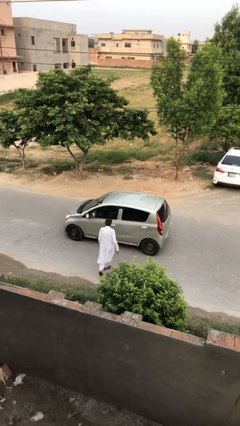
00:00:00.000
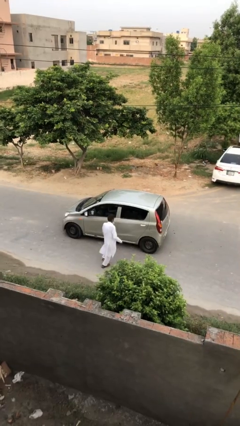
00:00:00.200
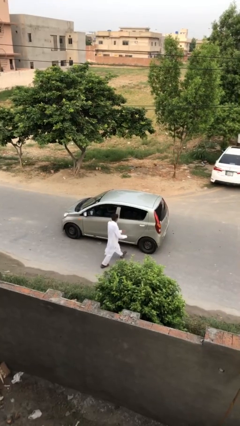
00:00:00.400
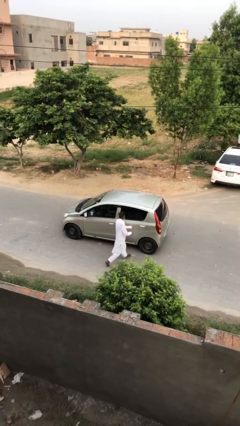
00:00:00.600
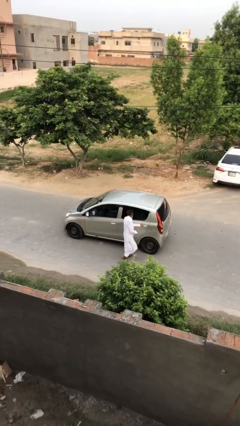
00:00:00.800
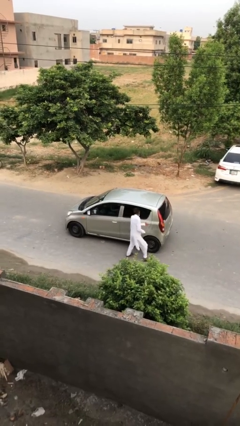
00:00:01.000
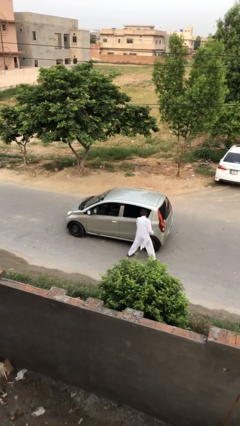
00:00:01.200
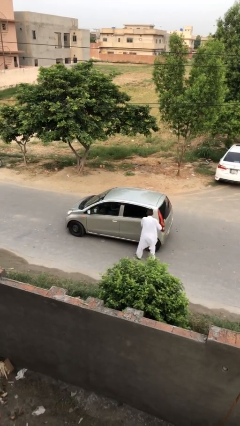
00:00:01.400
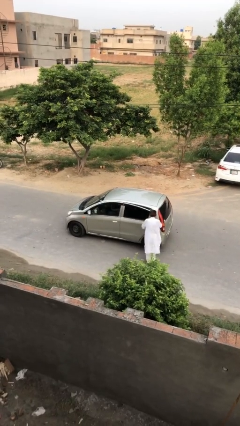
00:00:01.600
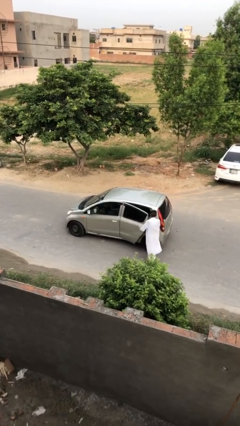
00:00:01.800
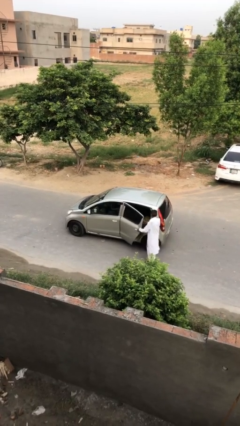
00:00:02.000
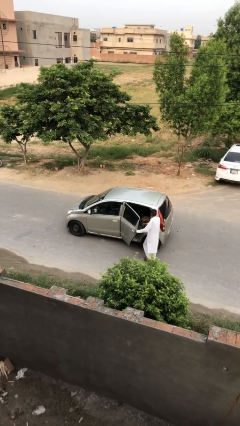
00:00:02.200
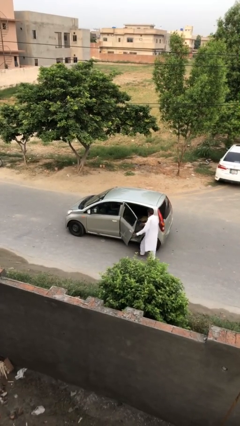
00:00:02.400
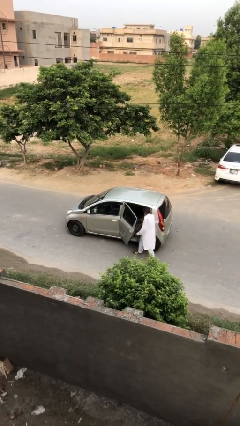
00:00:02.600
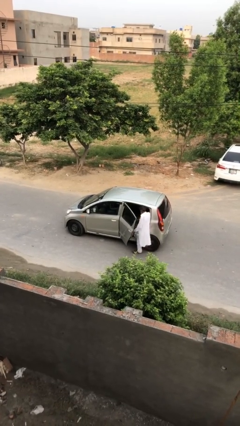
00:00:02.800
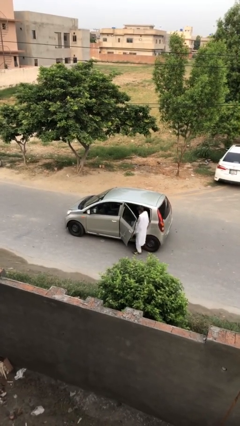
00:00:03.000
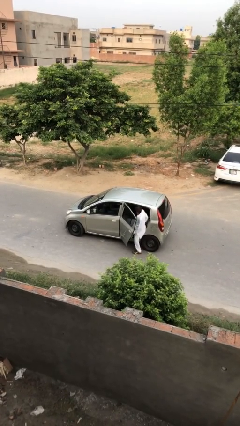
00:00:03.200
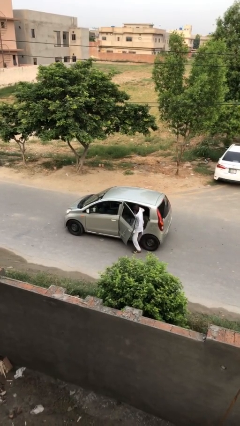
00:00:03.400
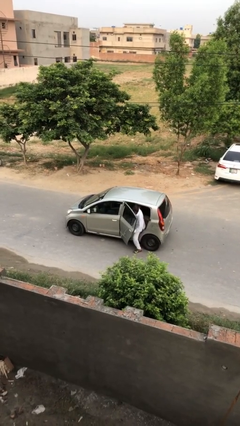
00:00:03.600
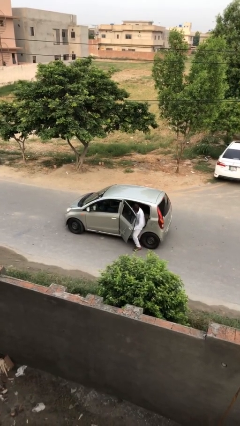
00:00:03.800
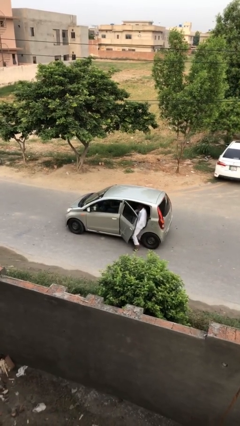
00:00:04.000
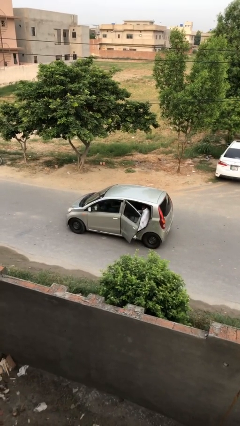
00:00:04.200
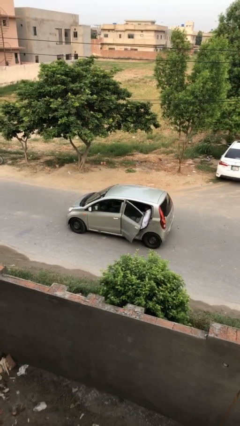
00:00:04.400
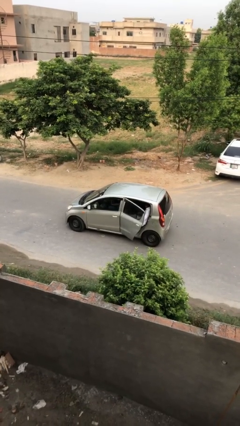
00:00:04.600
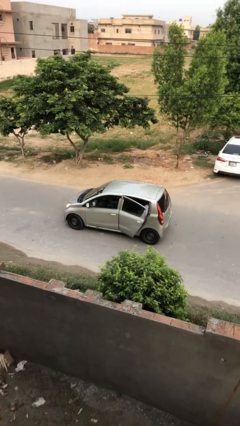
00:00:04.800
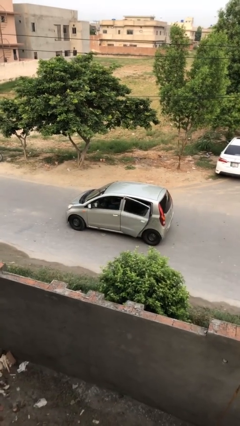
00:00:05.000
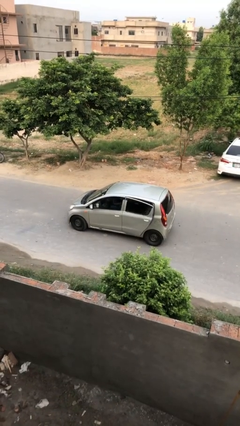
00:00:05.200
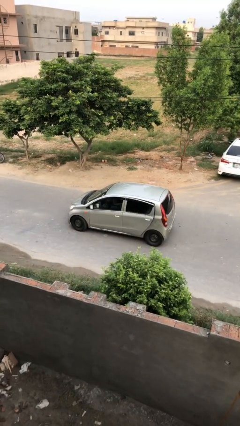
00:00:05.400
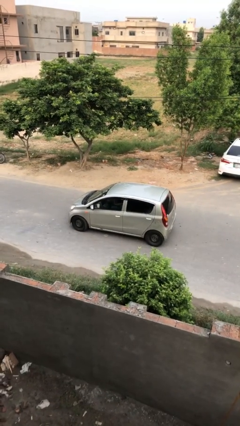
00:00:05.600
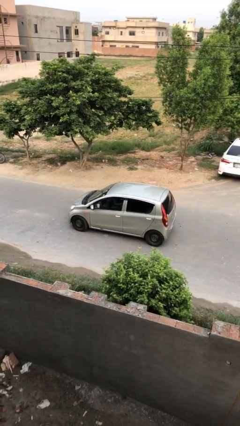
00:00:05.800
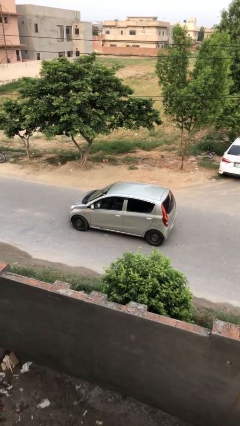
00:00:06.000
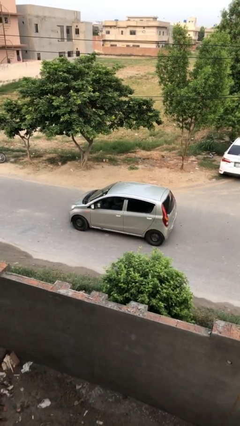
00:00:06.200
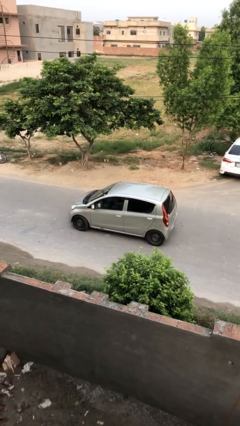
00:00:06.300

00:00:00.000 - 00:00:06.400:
car picks up person

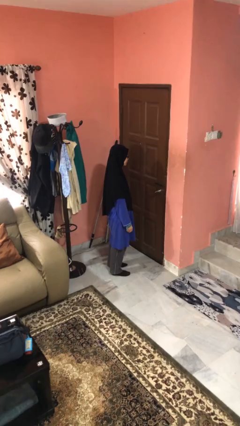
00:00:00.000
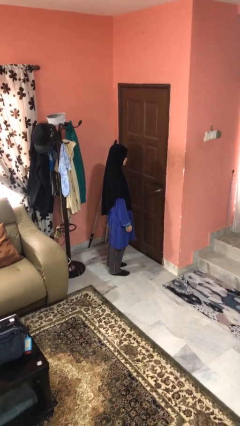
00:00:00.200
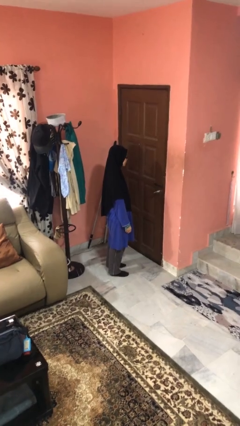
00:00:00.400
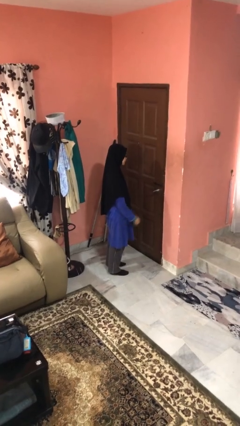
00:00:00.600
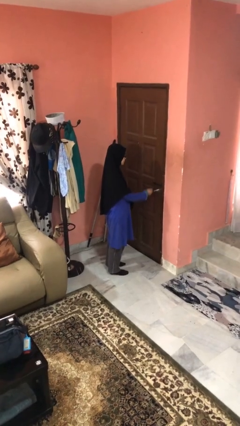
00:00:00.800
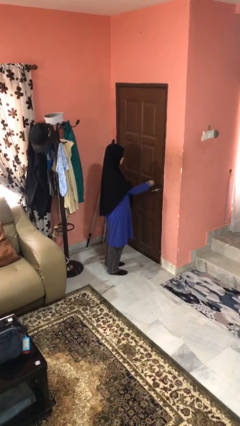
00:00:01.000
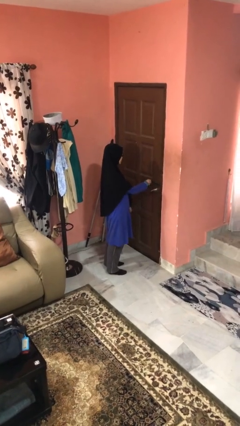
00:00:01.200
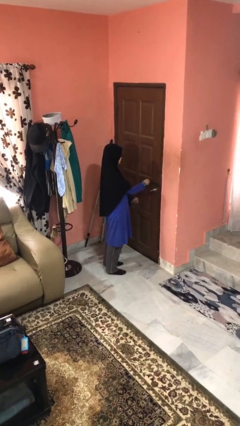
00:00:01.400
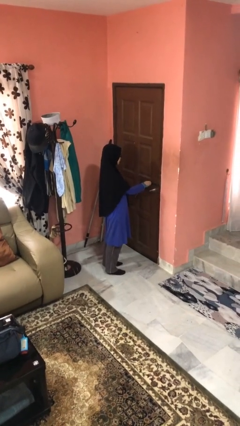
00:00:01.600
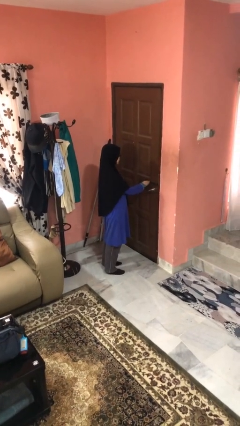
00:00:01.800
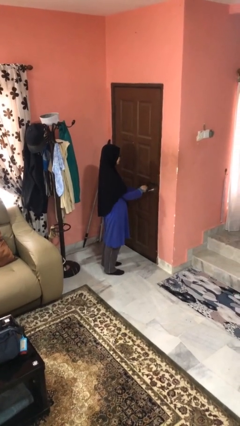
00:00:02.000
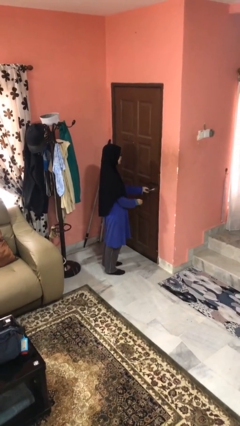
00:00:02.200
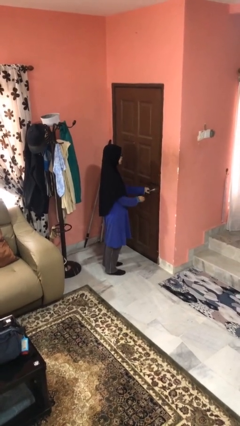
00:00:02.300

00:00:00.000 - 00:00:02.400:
person unlocks door with keys

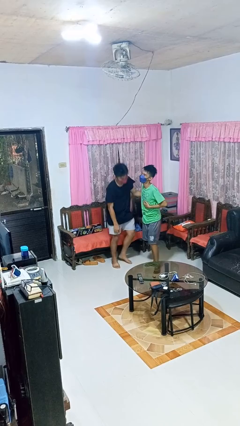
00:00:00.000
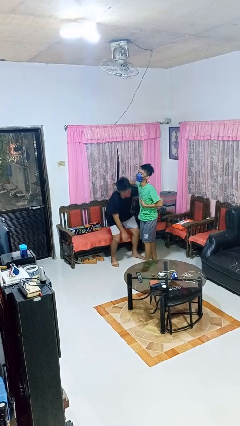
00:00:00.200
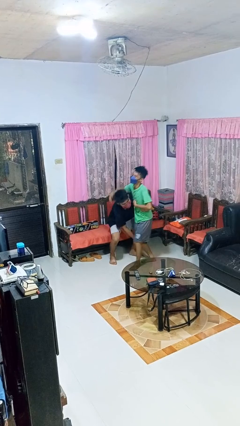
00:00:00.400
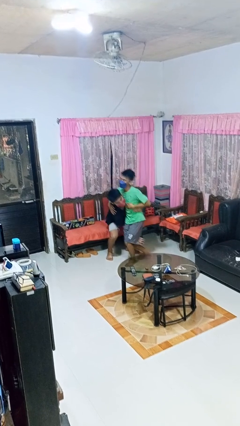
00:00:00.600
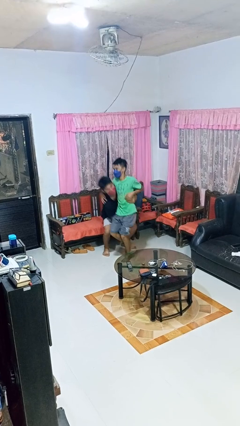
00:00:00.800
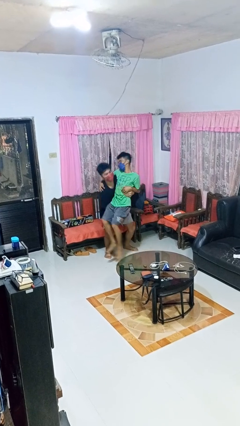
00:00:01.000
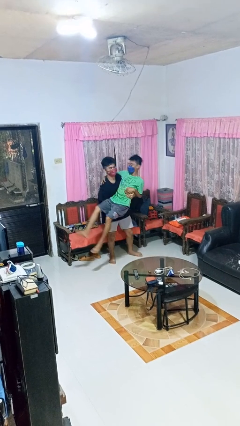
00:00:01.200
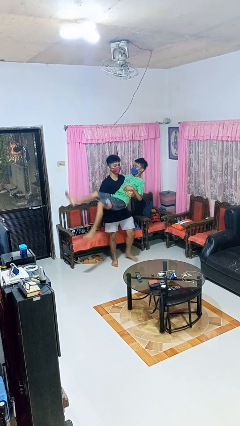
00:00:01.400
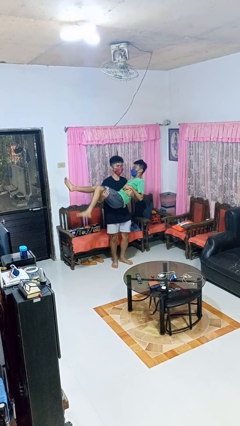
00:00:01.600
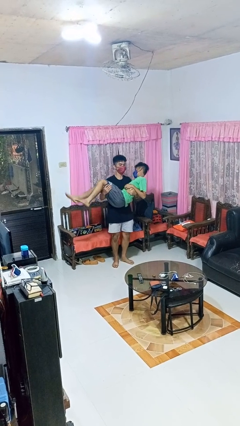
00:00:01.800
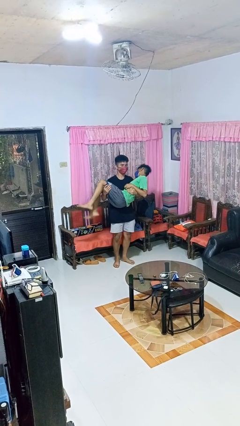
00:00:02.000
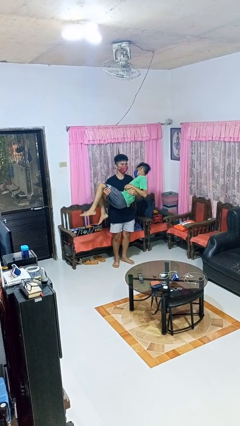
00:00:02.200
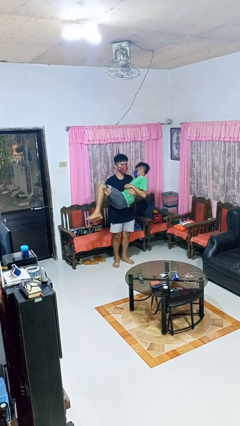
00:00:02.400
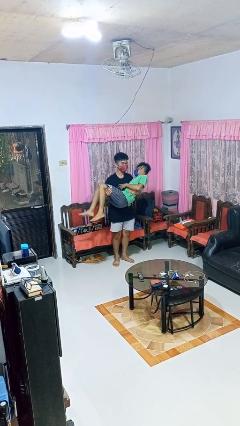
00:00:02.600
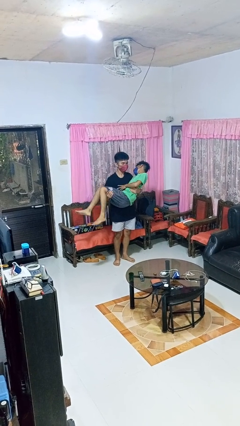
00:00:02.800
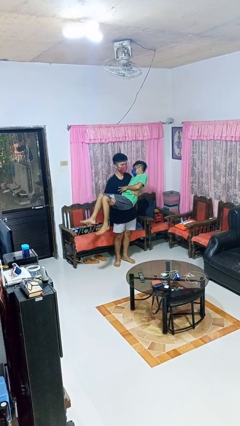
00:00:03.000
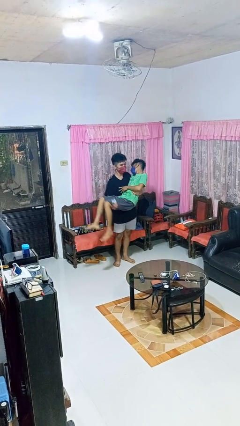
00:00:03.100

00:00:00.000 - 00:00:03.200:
person picks up person

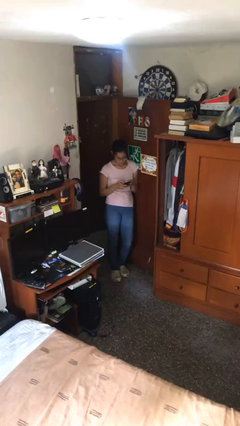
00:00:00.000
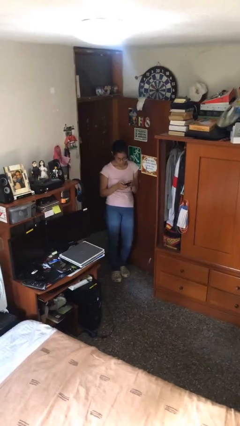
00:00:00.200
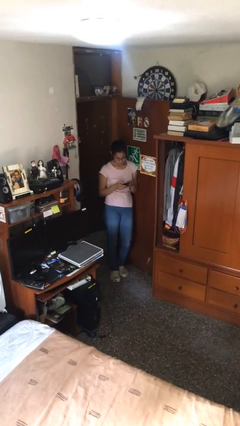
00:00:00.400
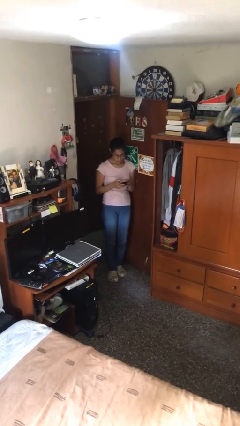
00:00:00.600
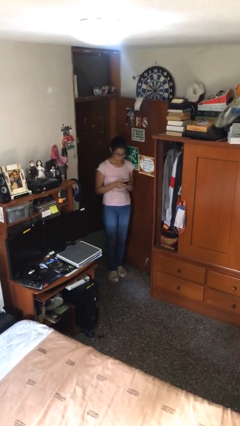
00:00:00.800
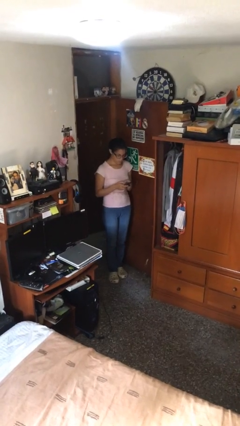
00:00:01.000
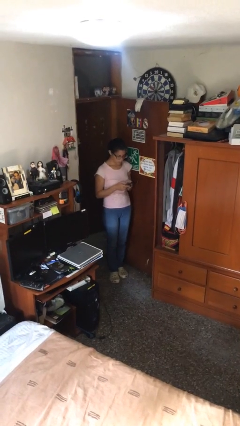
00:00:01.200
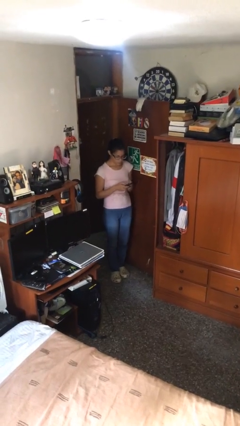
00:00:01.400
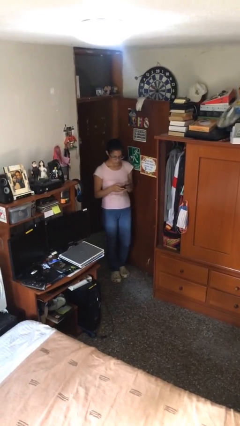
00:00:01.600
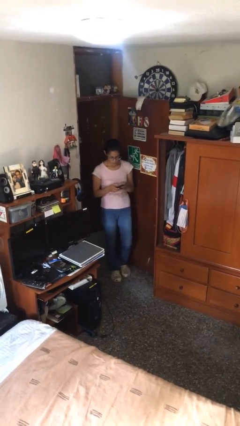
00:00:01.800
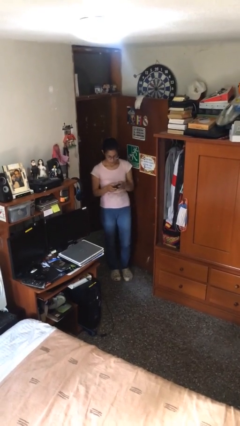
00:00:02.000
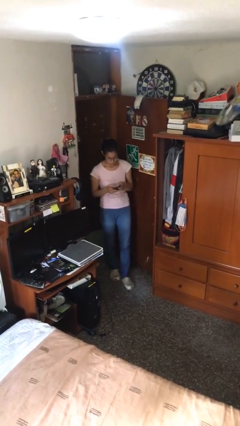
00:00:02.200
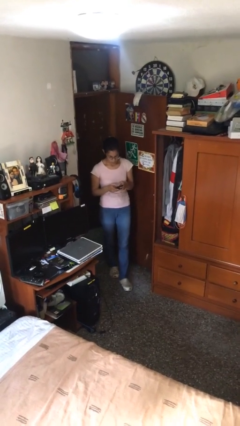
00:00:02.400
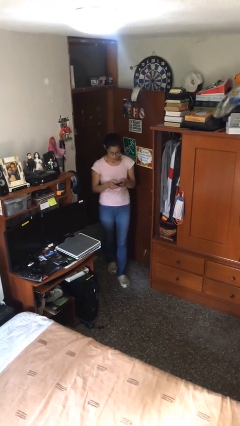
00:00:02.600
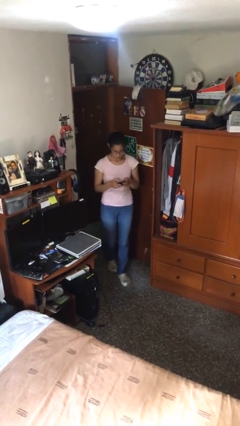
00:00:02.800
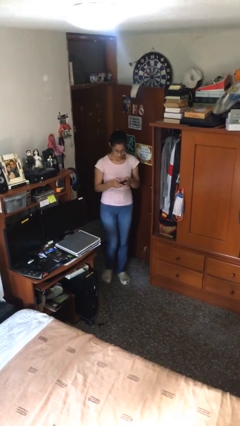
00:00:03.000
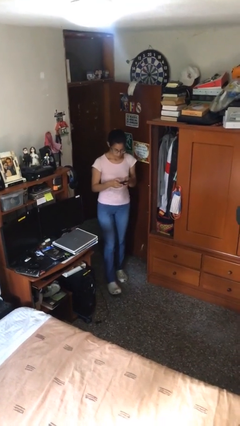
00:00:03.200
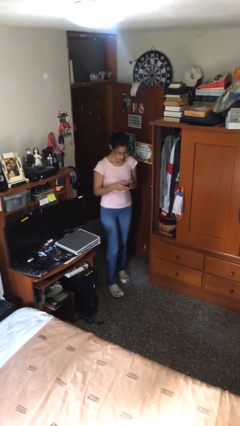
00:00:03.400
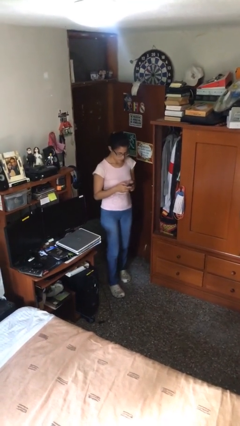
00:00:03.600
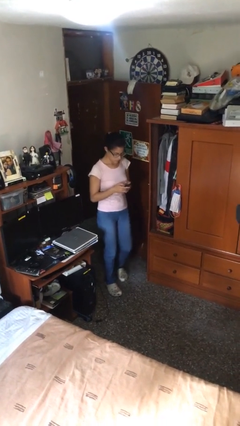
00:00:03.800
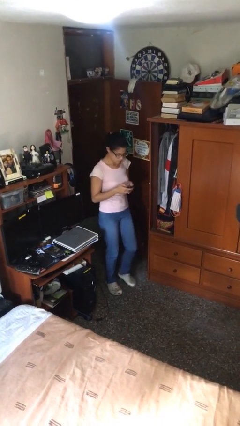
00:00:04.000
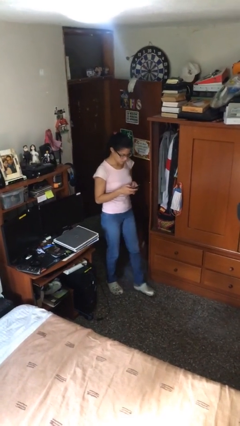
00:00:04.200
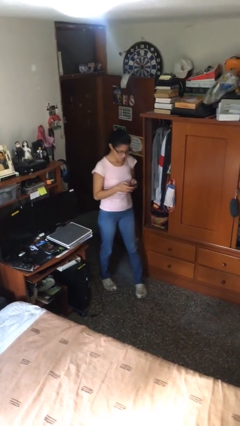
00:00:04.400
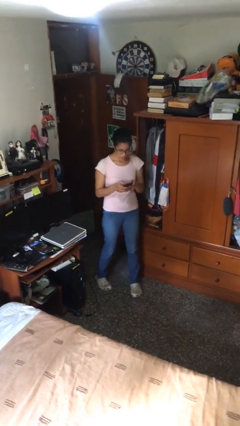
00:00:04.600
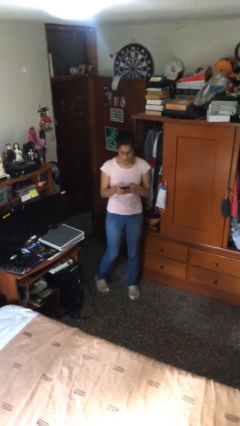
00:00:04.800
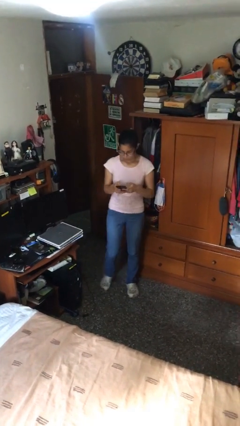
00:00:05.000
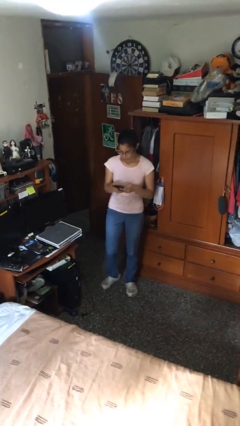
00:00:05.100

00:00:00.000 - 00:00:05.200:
person texts on phone

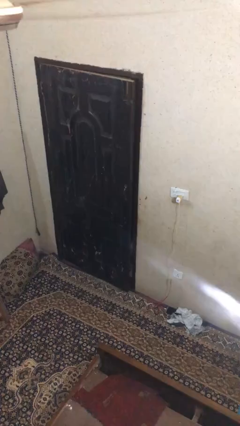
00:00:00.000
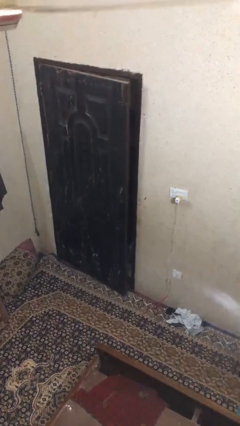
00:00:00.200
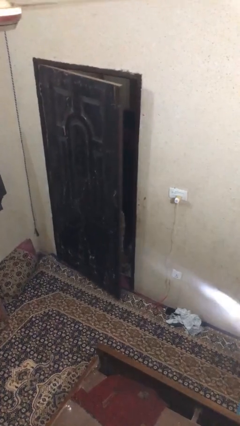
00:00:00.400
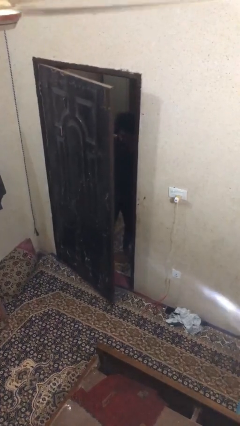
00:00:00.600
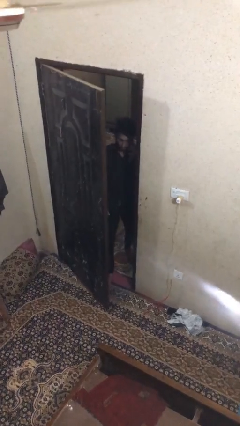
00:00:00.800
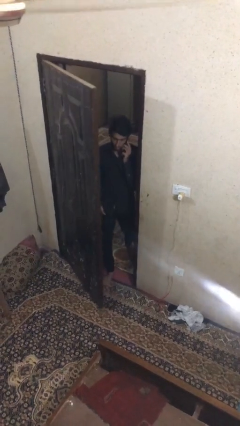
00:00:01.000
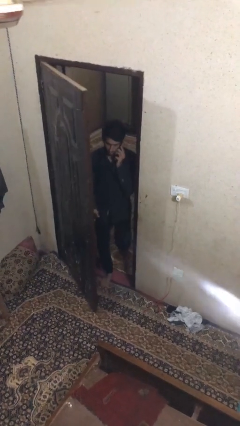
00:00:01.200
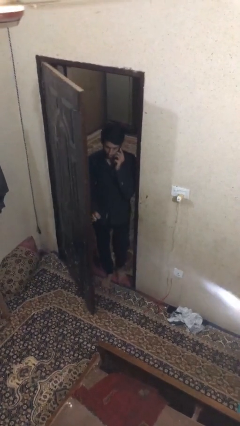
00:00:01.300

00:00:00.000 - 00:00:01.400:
person opens facility door
